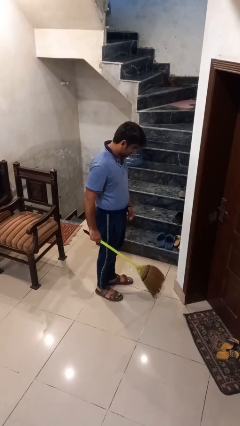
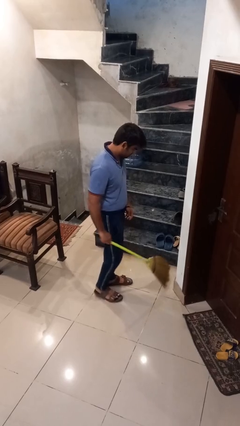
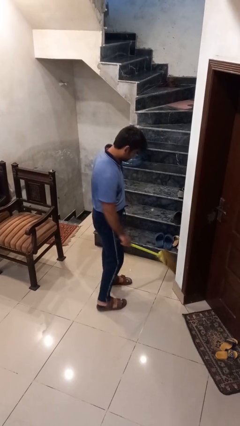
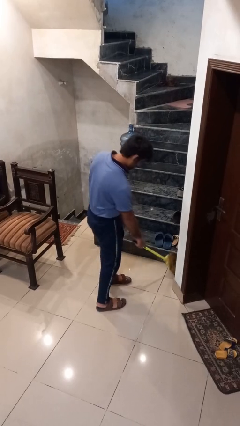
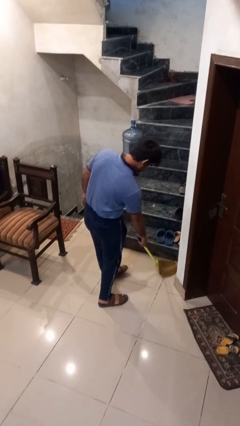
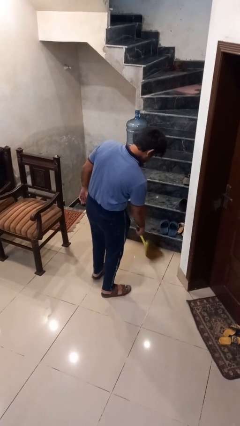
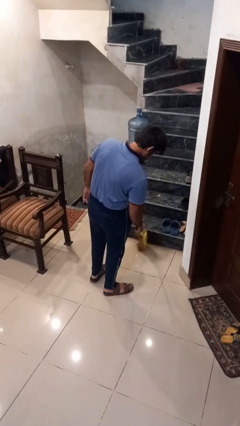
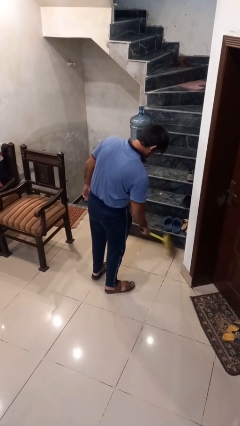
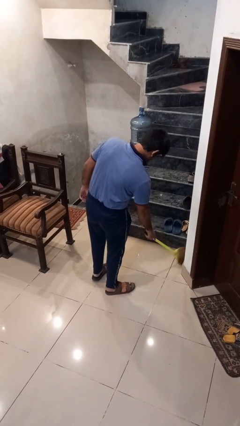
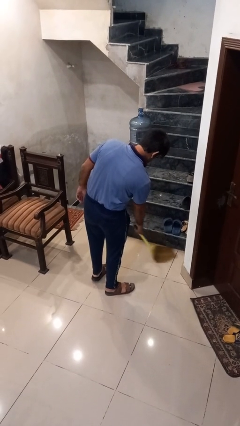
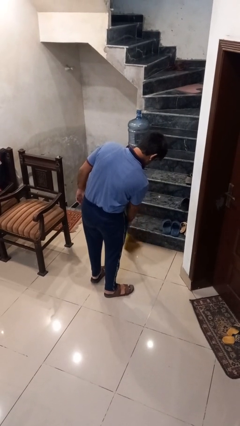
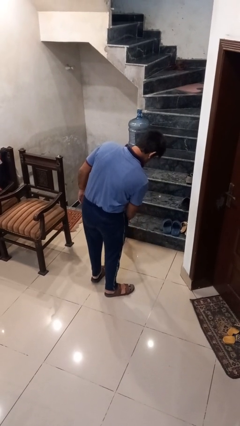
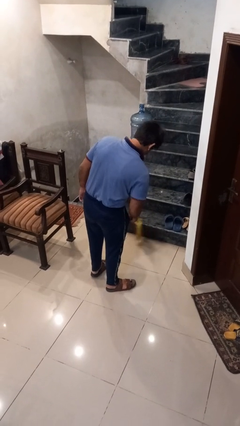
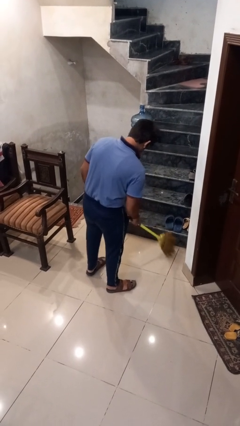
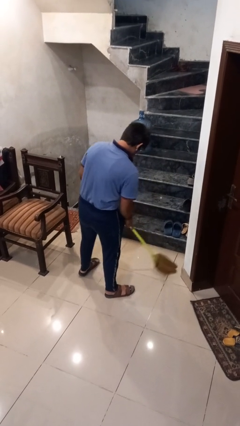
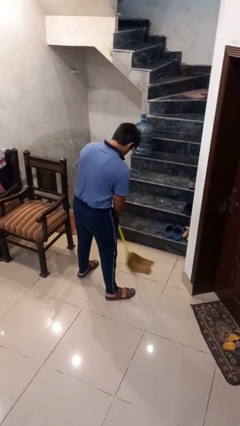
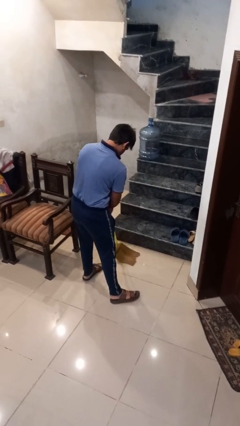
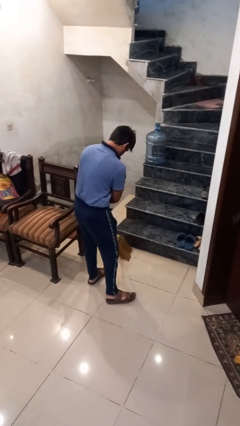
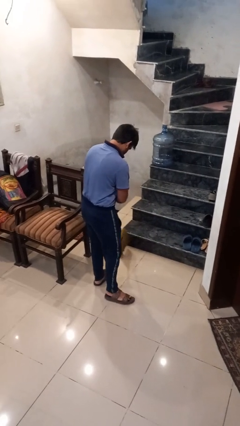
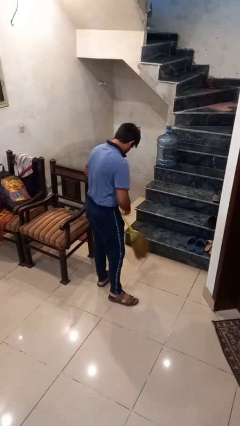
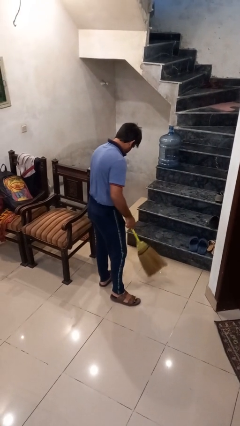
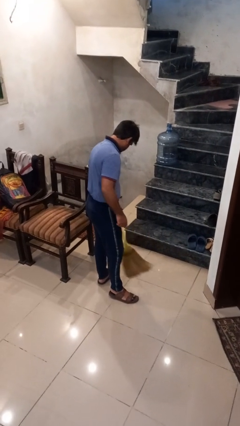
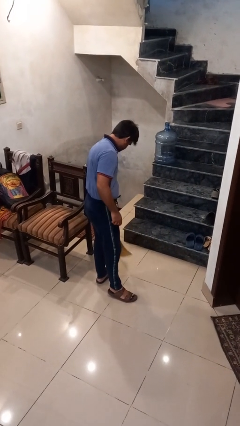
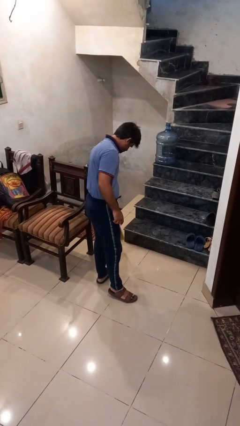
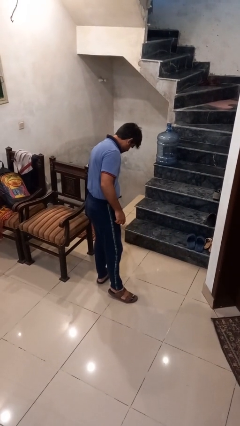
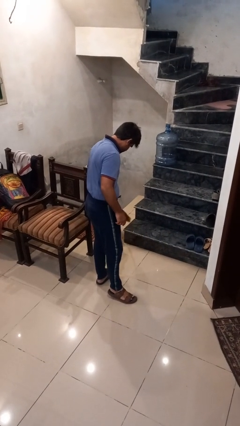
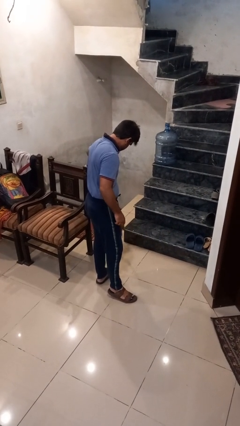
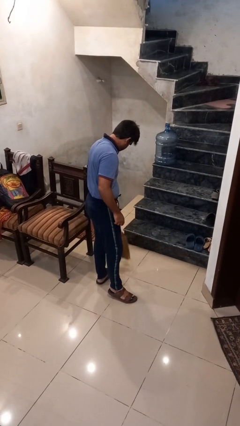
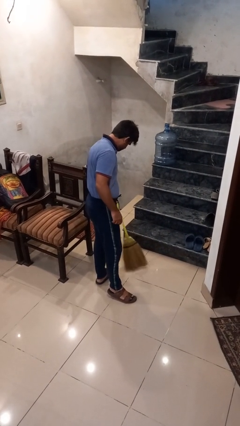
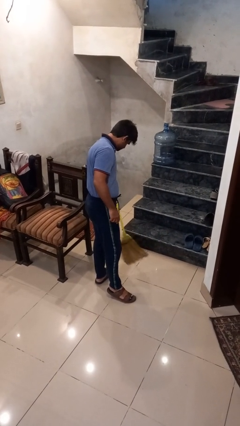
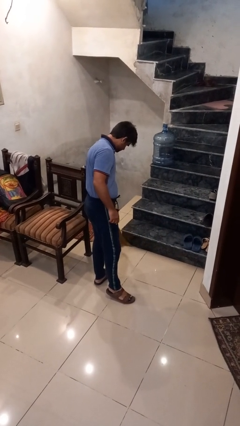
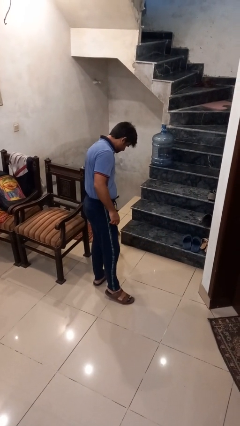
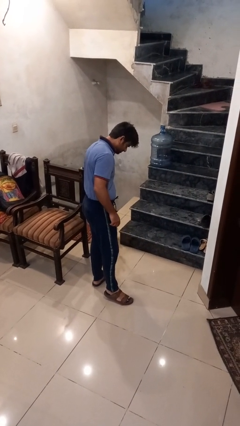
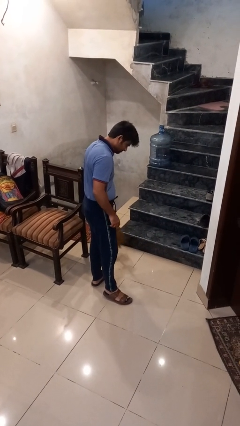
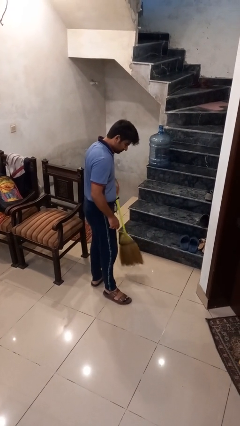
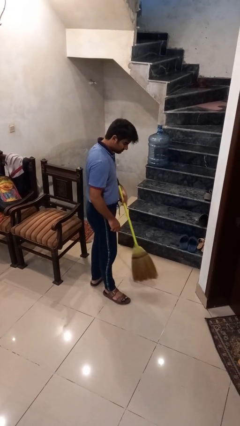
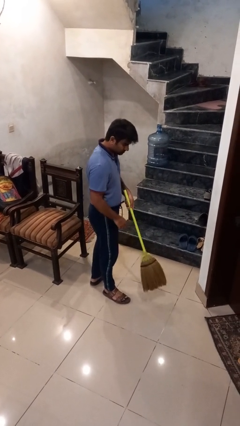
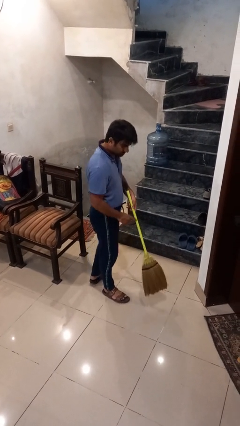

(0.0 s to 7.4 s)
person sweeps floor

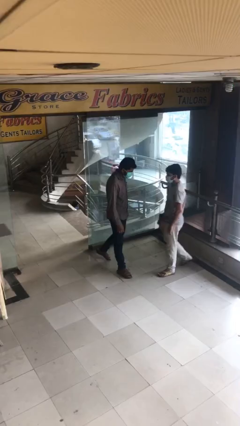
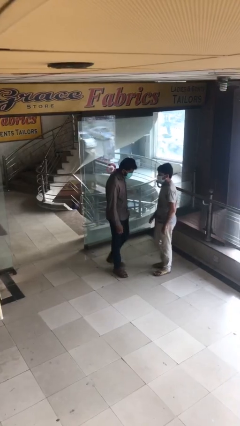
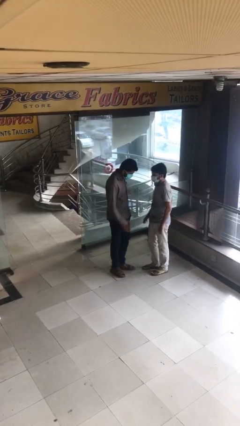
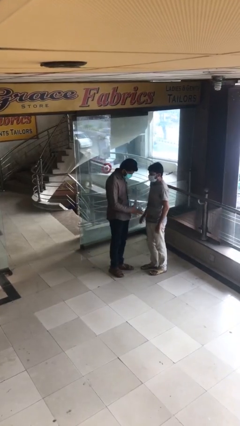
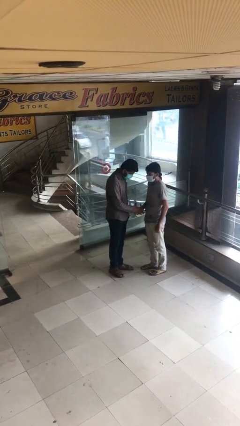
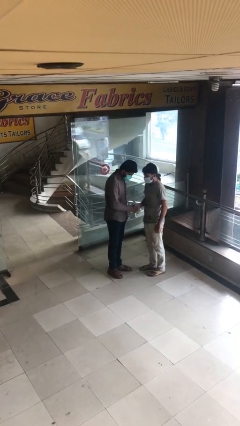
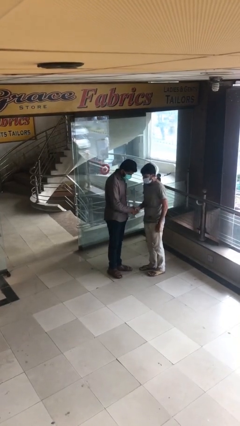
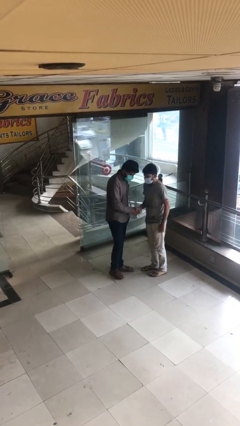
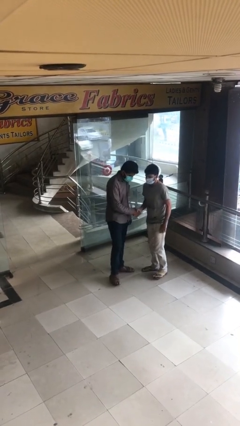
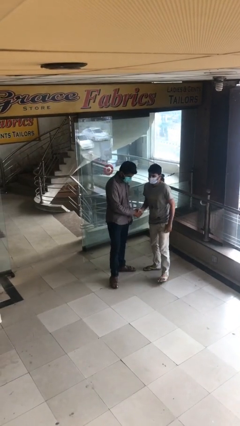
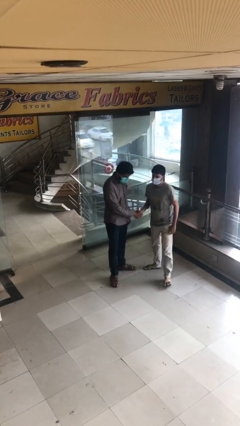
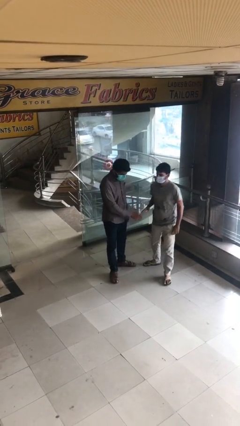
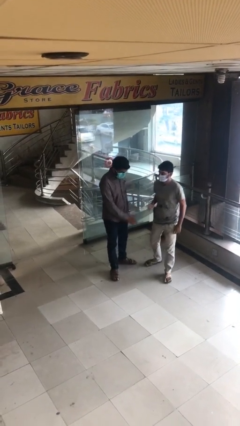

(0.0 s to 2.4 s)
person shakes hand

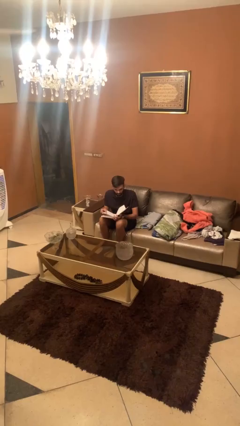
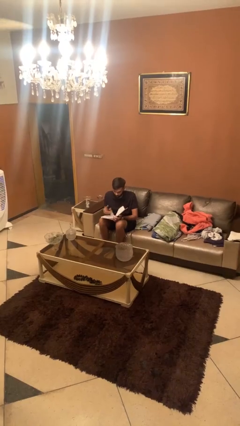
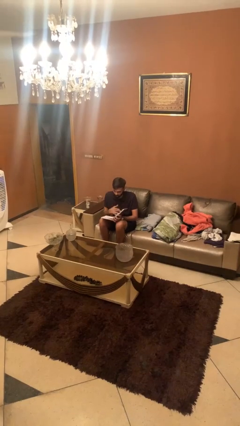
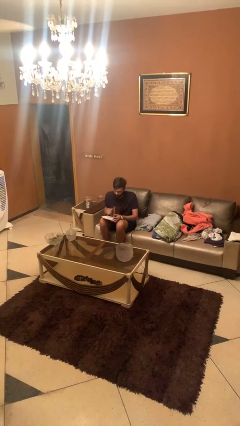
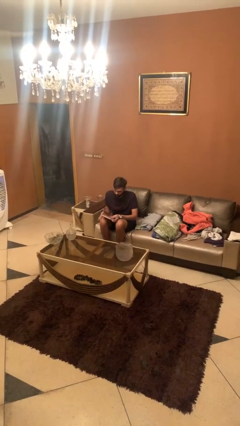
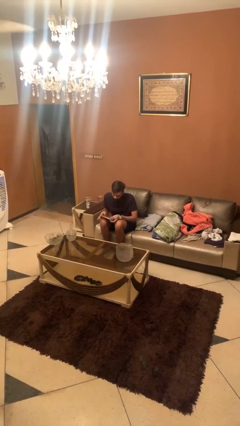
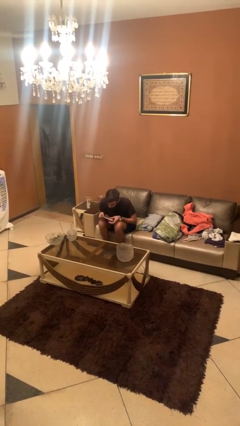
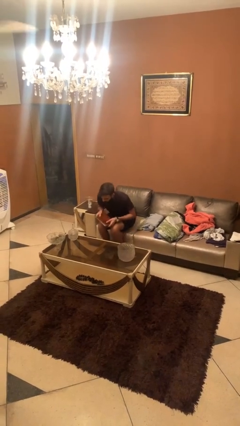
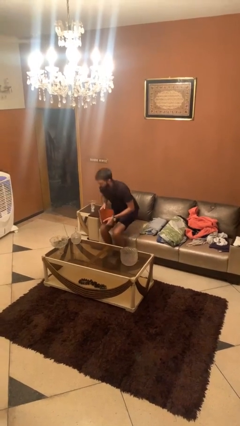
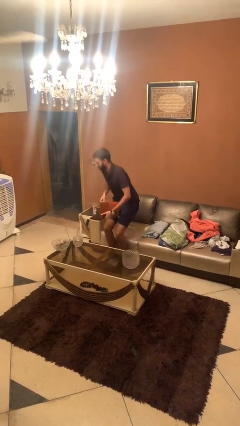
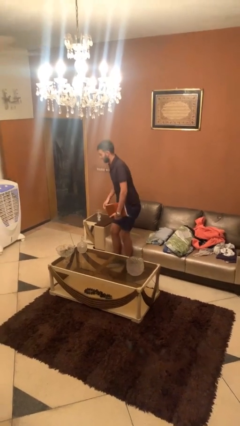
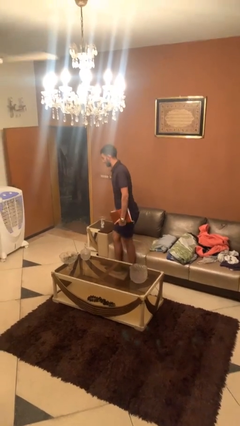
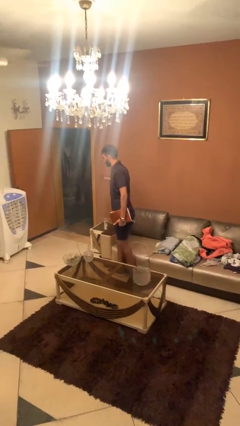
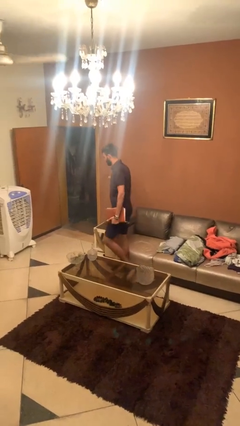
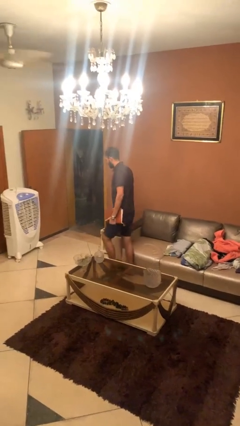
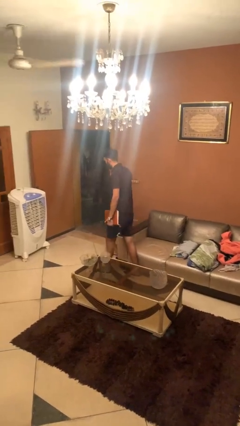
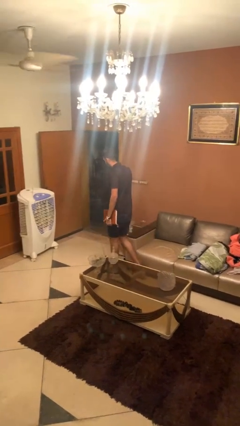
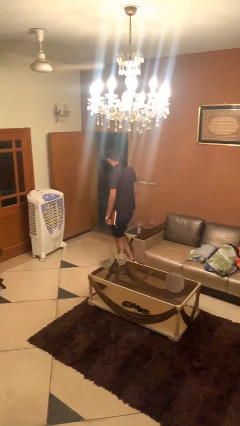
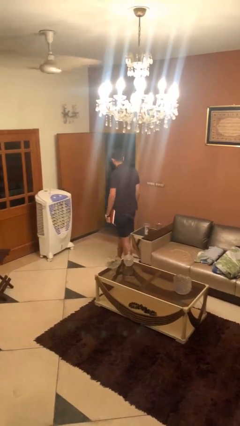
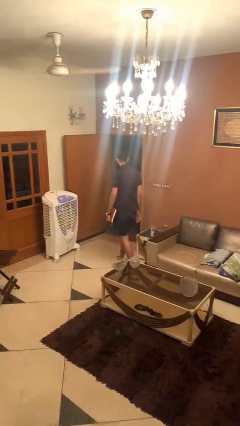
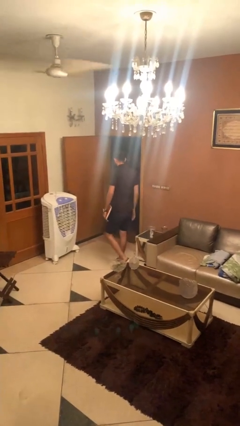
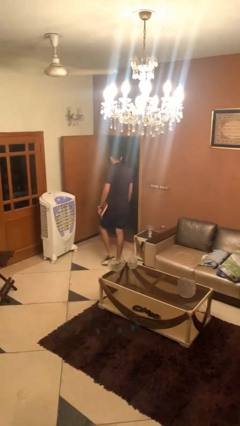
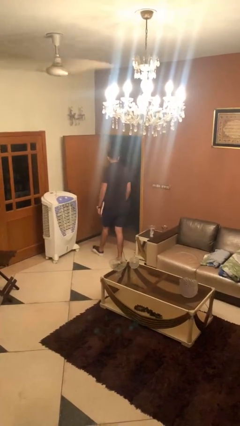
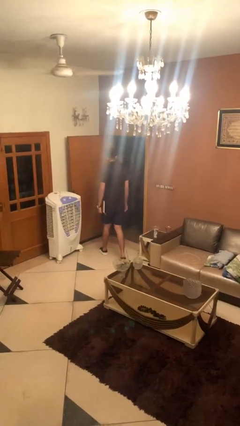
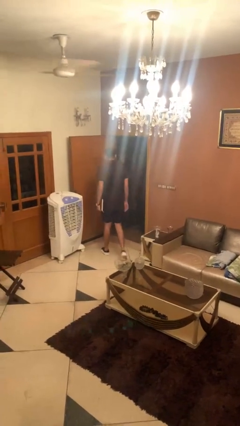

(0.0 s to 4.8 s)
person stands up

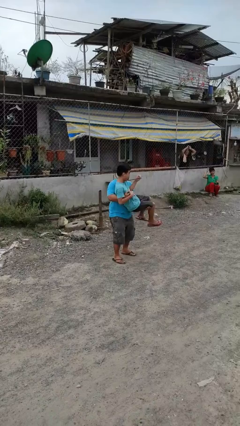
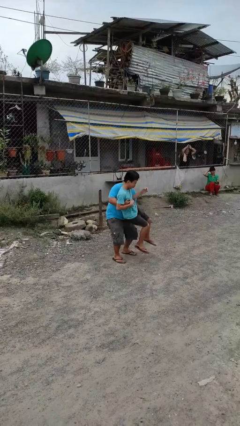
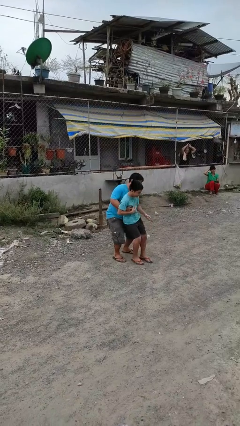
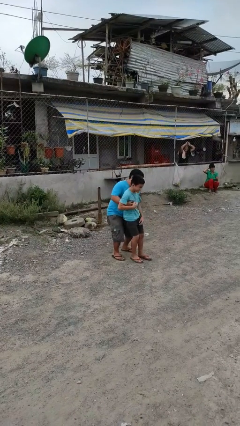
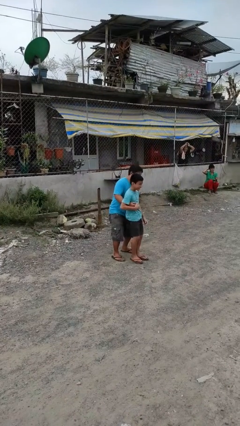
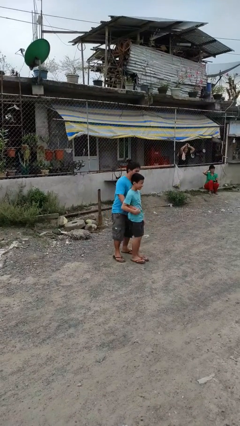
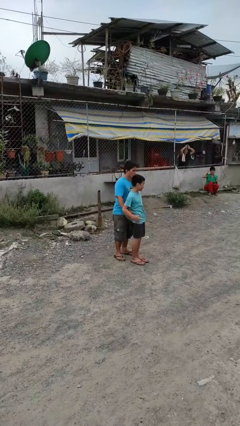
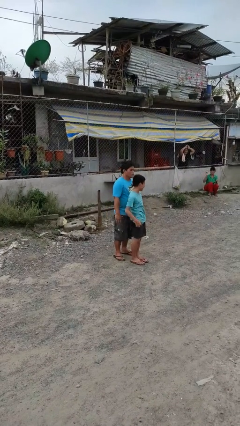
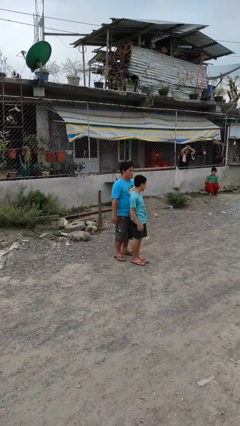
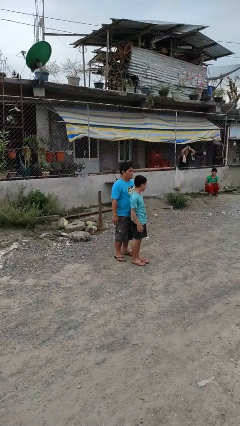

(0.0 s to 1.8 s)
person puts down person

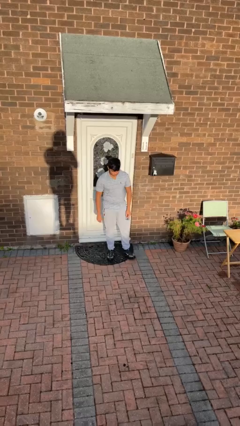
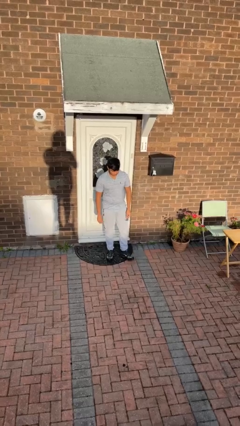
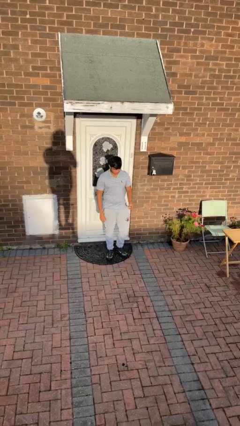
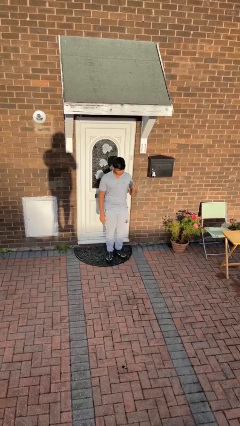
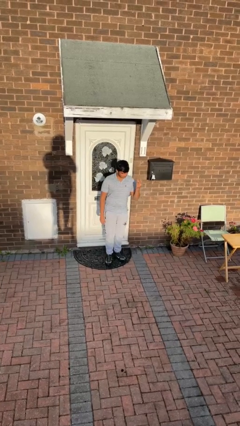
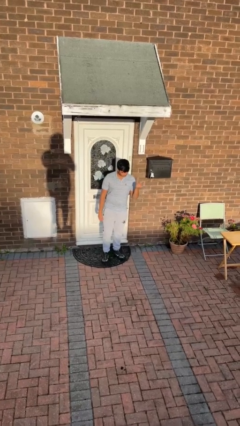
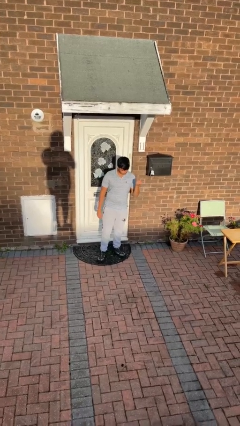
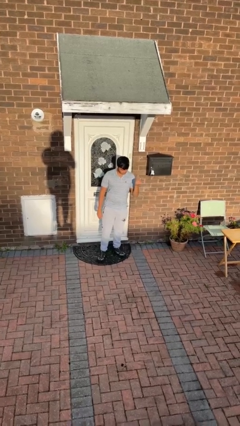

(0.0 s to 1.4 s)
person snaps fingers
